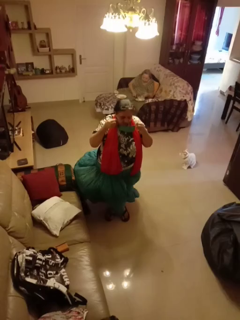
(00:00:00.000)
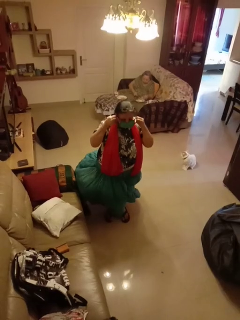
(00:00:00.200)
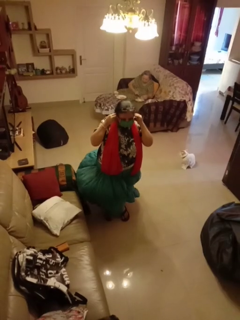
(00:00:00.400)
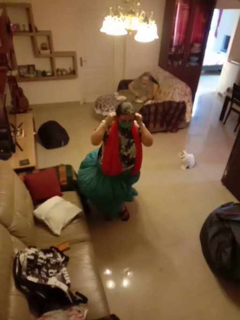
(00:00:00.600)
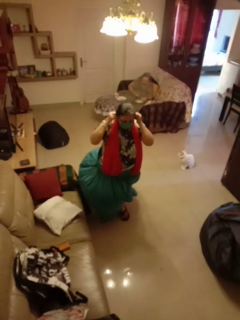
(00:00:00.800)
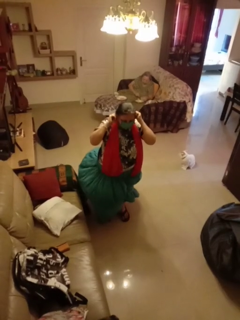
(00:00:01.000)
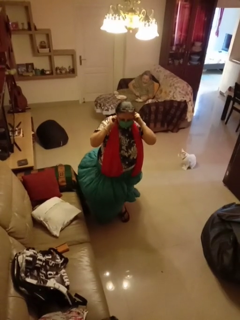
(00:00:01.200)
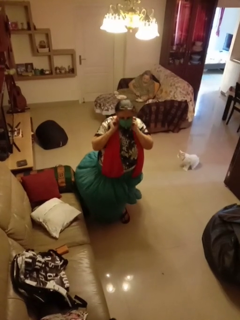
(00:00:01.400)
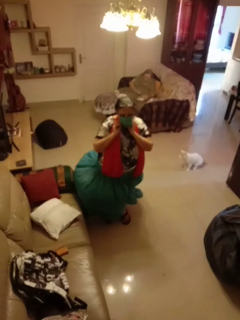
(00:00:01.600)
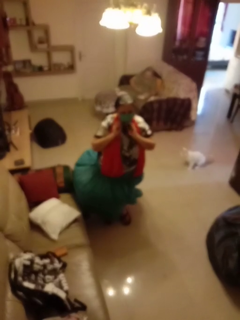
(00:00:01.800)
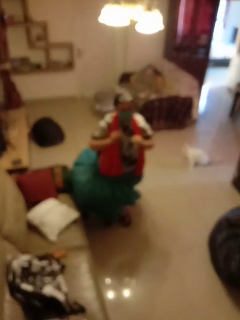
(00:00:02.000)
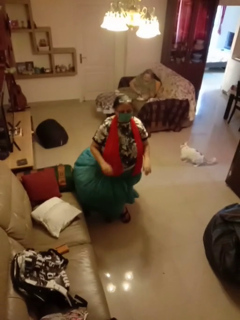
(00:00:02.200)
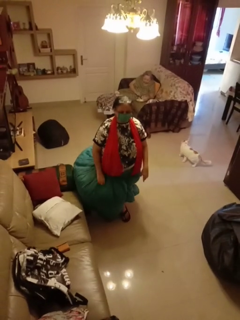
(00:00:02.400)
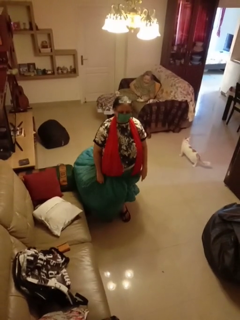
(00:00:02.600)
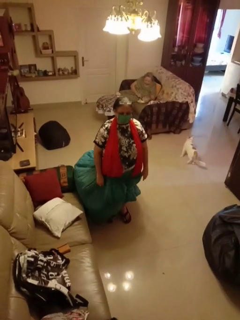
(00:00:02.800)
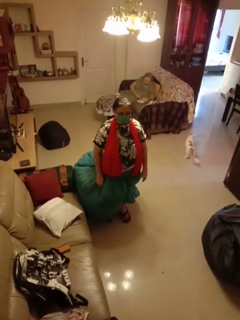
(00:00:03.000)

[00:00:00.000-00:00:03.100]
person puts on facemask

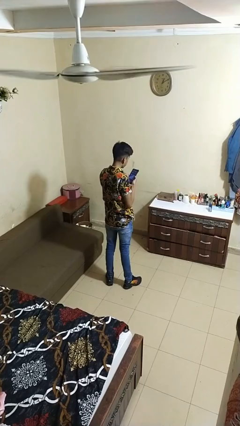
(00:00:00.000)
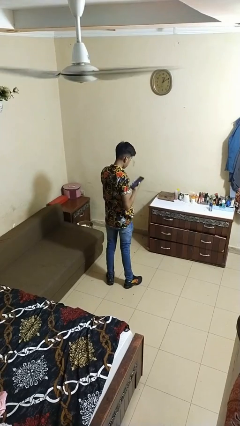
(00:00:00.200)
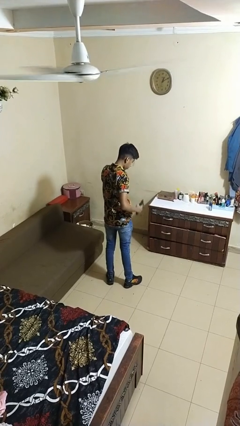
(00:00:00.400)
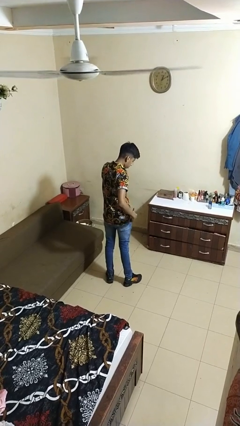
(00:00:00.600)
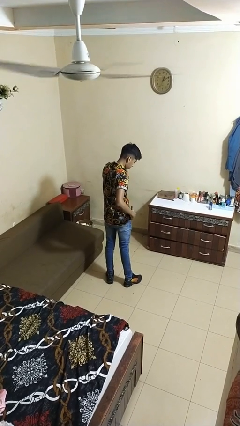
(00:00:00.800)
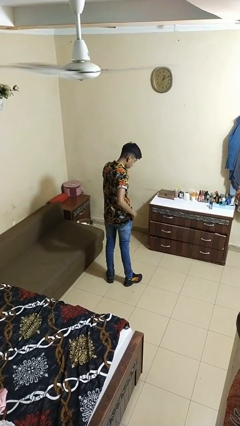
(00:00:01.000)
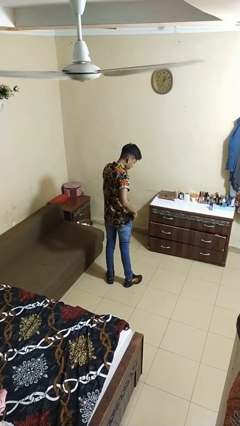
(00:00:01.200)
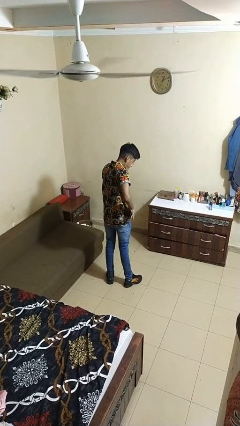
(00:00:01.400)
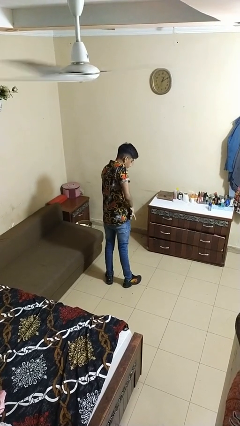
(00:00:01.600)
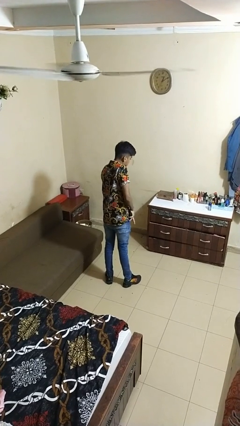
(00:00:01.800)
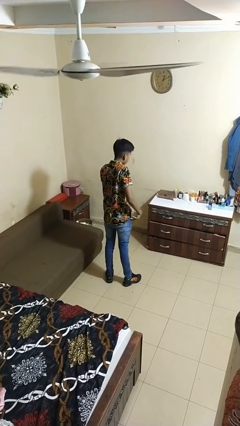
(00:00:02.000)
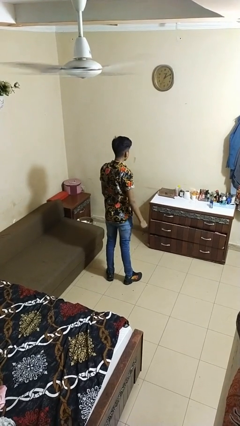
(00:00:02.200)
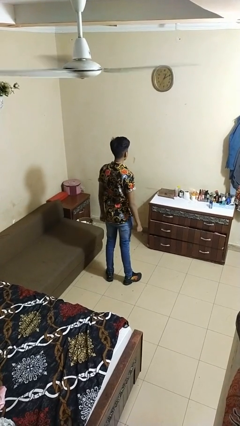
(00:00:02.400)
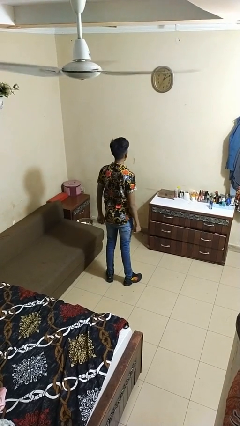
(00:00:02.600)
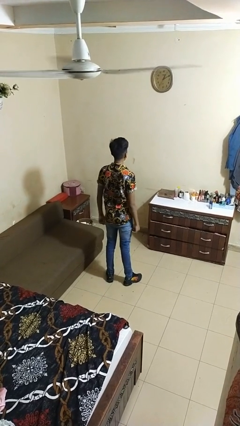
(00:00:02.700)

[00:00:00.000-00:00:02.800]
person puts phone into pocket

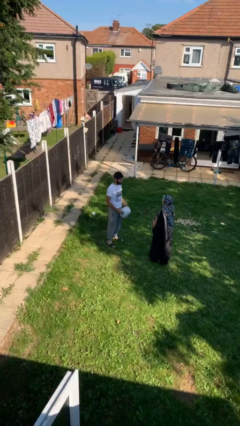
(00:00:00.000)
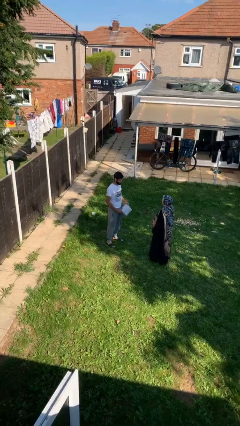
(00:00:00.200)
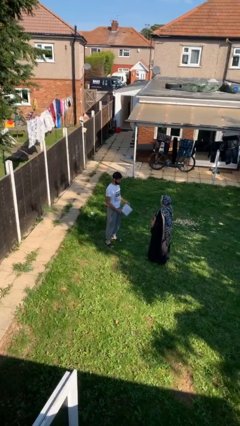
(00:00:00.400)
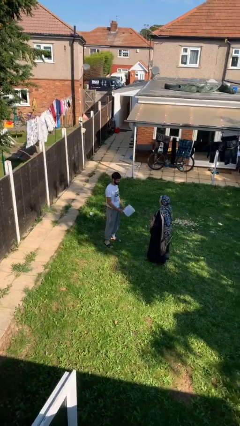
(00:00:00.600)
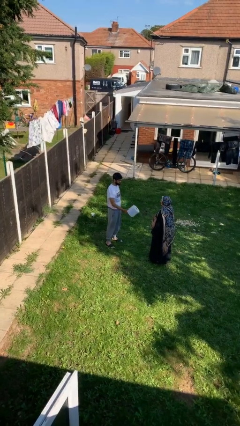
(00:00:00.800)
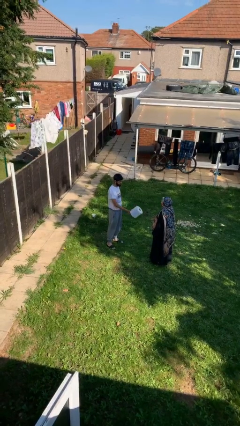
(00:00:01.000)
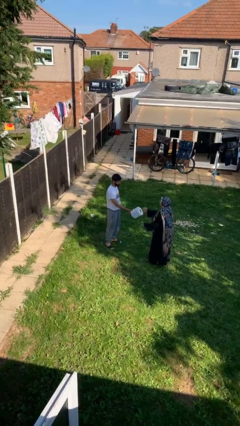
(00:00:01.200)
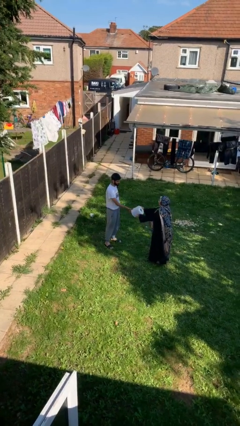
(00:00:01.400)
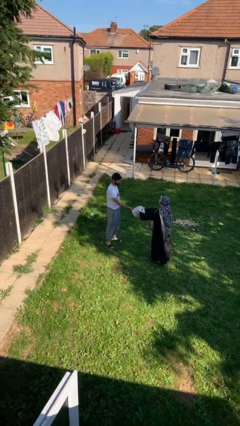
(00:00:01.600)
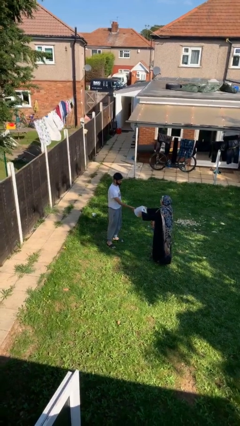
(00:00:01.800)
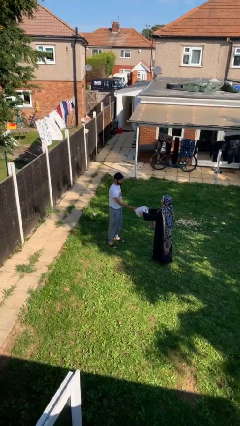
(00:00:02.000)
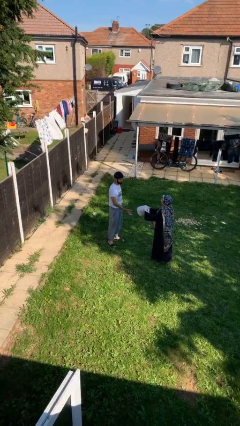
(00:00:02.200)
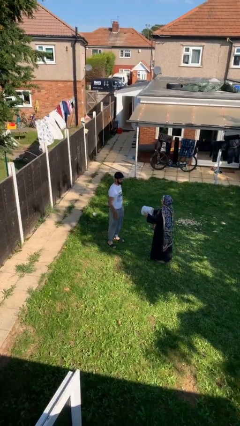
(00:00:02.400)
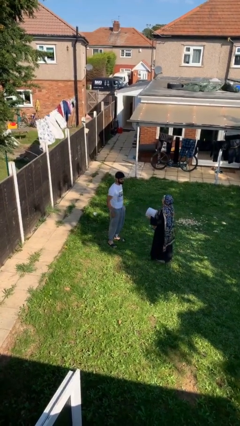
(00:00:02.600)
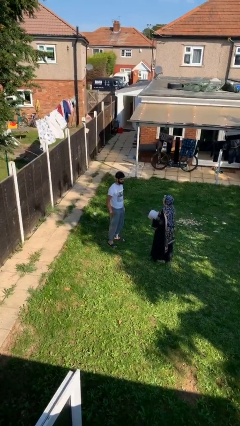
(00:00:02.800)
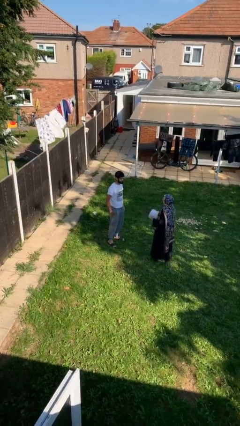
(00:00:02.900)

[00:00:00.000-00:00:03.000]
person transfers object to person

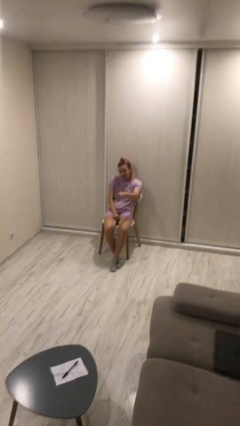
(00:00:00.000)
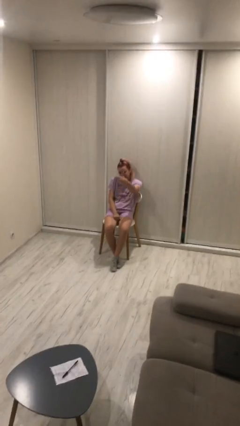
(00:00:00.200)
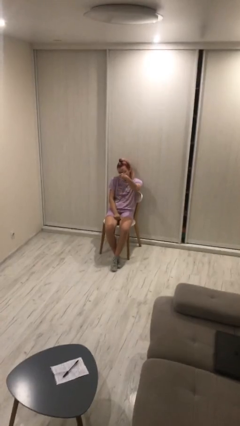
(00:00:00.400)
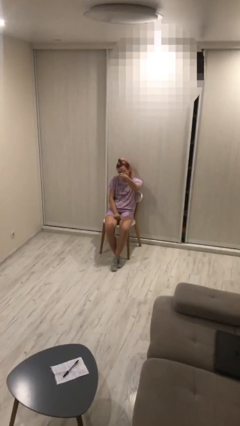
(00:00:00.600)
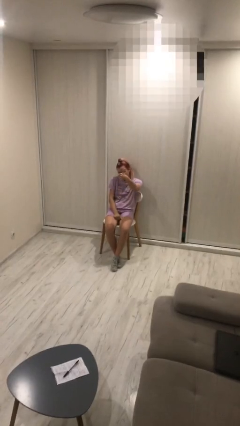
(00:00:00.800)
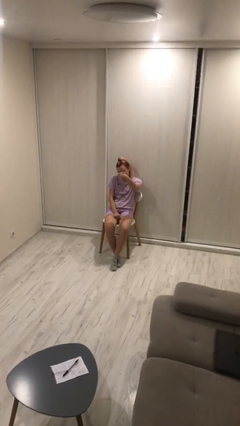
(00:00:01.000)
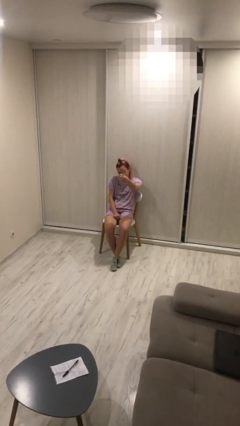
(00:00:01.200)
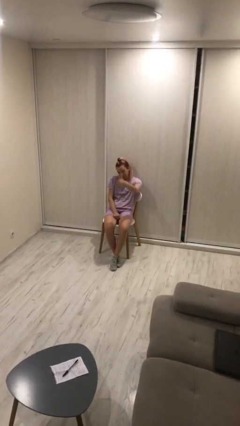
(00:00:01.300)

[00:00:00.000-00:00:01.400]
person gestures thumbs up

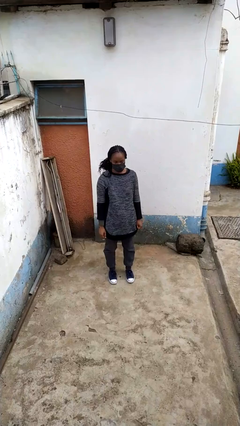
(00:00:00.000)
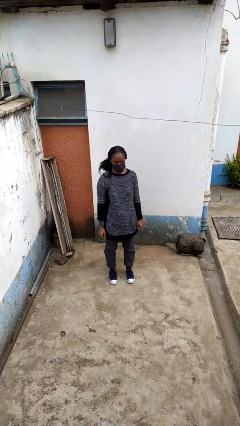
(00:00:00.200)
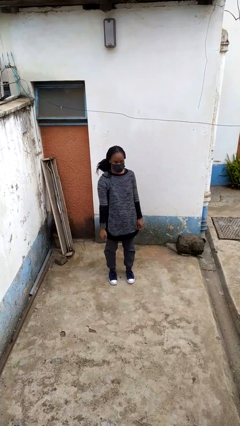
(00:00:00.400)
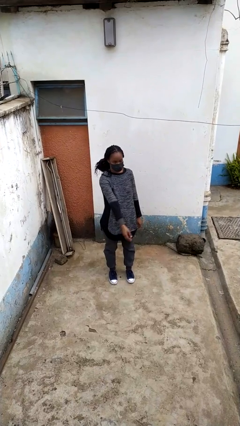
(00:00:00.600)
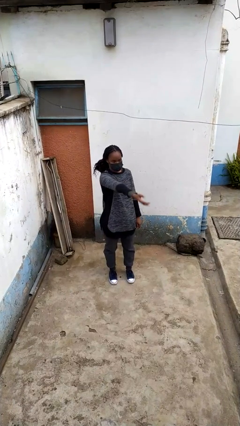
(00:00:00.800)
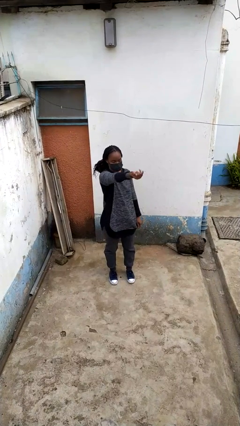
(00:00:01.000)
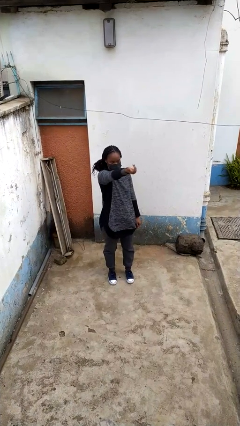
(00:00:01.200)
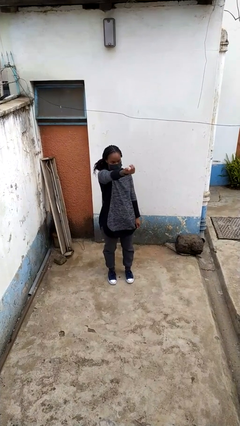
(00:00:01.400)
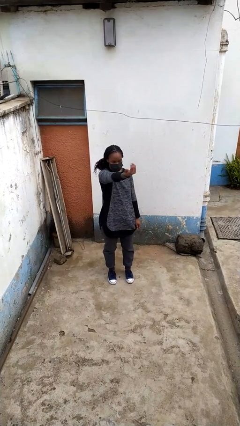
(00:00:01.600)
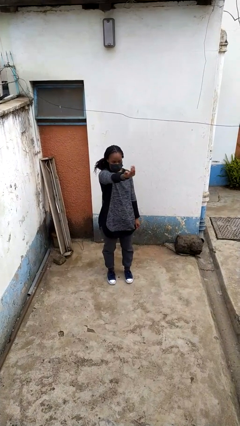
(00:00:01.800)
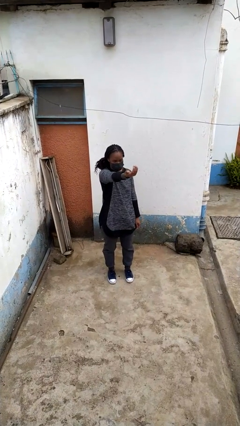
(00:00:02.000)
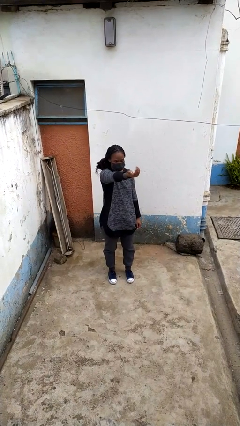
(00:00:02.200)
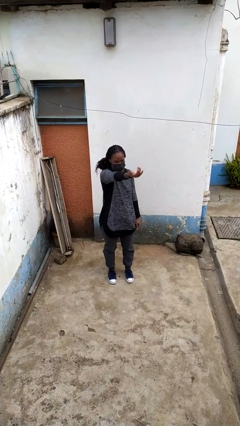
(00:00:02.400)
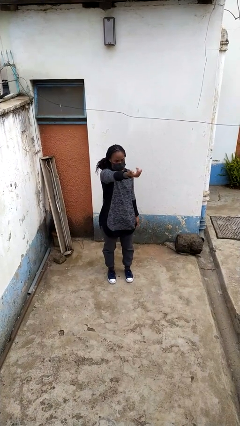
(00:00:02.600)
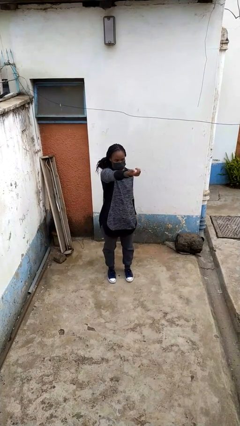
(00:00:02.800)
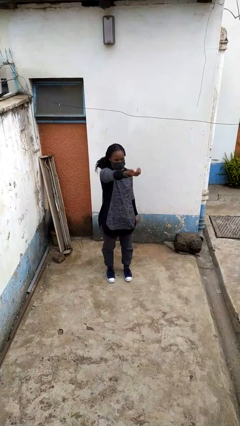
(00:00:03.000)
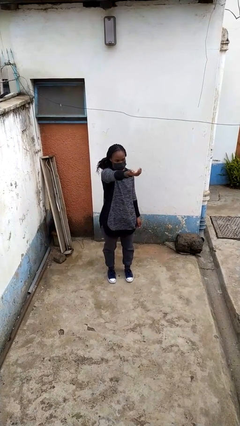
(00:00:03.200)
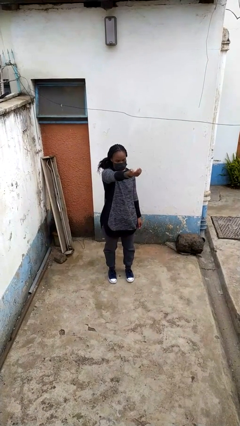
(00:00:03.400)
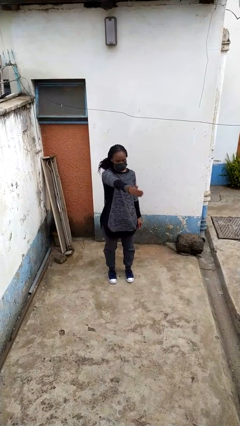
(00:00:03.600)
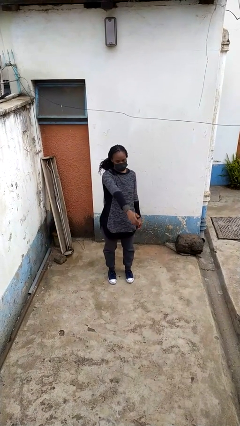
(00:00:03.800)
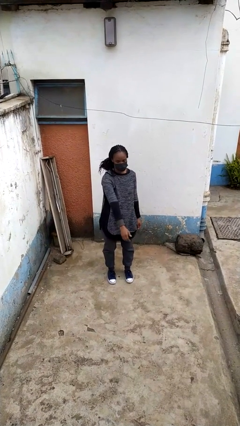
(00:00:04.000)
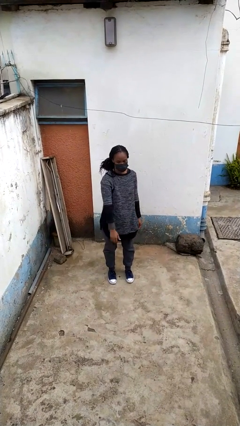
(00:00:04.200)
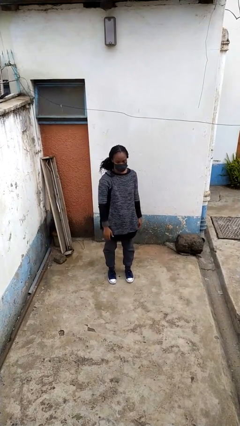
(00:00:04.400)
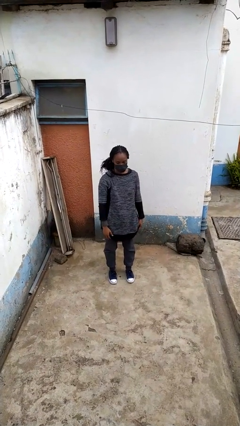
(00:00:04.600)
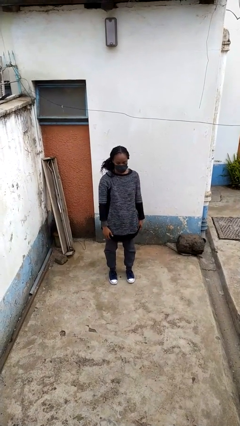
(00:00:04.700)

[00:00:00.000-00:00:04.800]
person gestures come here

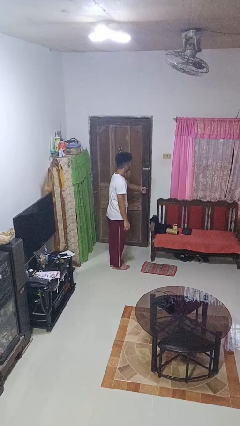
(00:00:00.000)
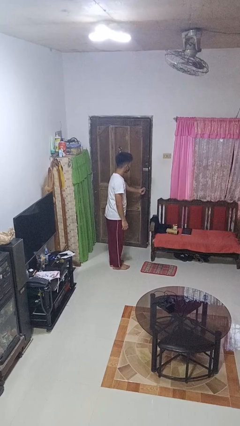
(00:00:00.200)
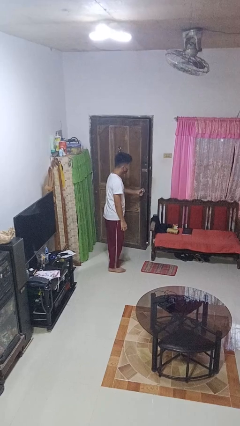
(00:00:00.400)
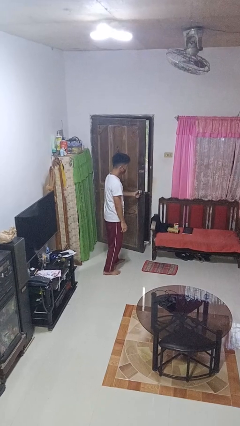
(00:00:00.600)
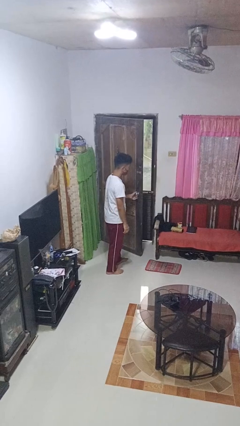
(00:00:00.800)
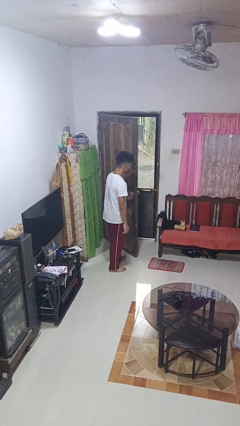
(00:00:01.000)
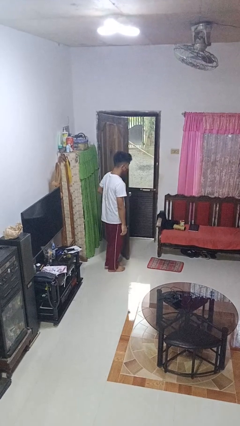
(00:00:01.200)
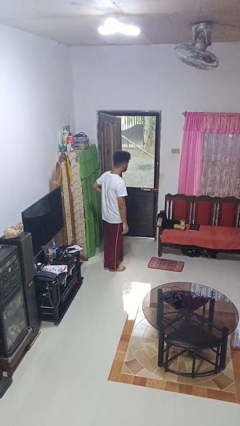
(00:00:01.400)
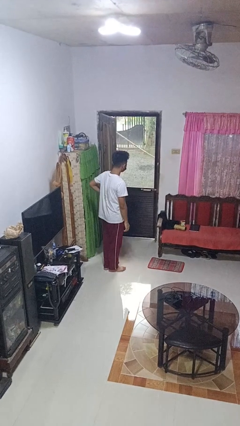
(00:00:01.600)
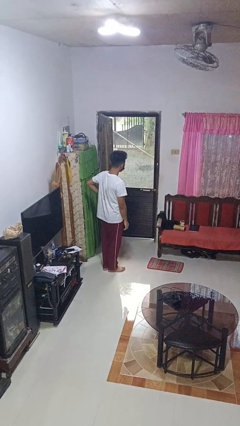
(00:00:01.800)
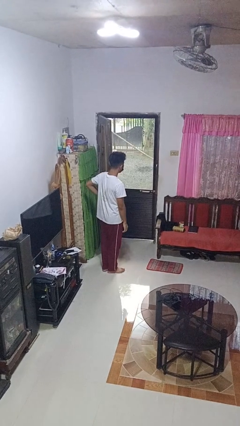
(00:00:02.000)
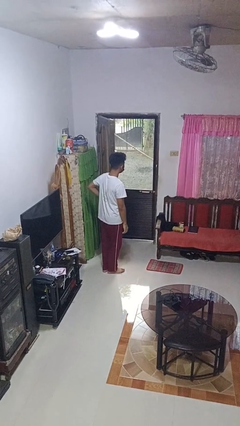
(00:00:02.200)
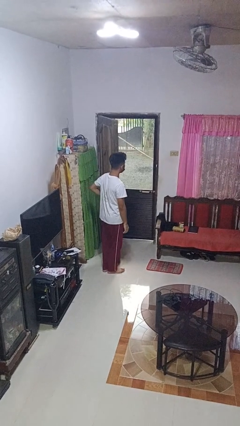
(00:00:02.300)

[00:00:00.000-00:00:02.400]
person opens facility door

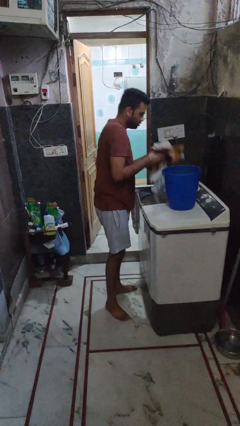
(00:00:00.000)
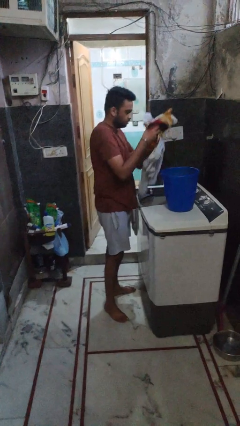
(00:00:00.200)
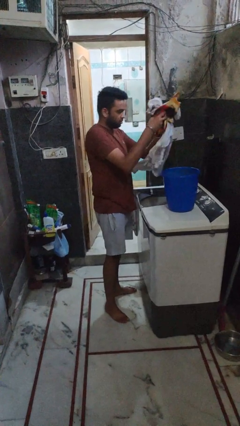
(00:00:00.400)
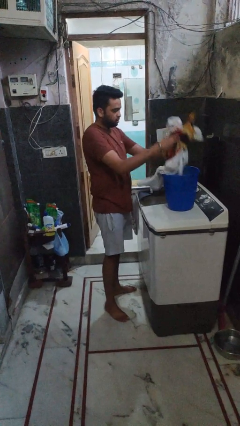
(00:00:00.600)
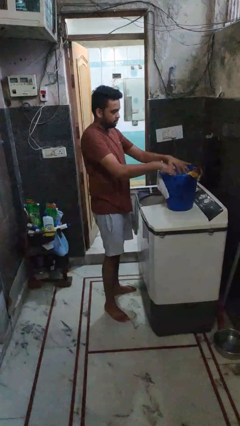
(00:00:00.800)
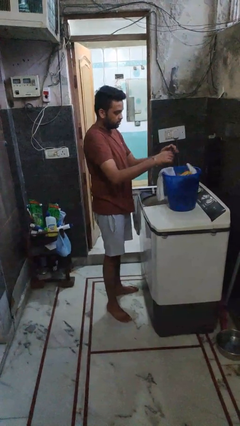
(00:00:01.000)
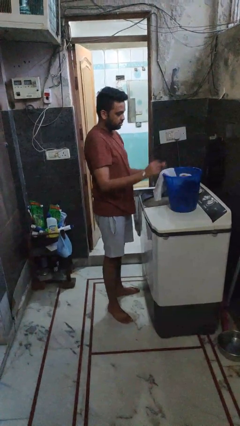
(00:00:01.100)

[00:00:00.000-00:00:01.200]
person unloads clotheswasher
